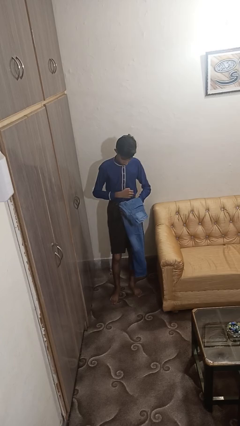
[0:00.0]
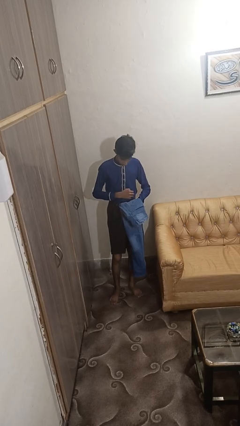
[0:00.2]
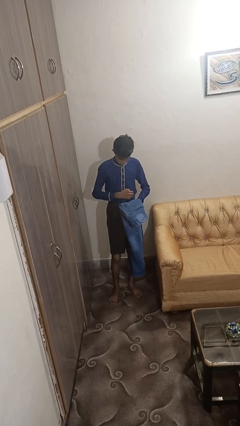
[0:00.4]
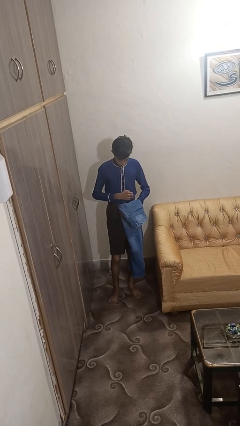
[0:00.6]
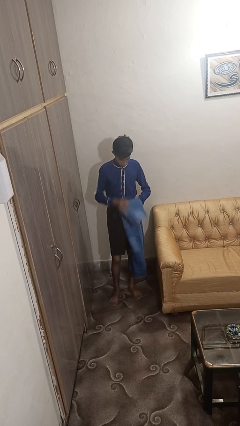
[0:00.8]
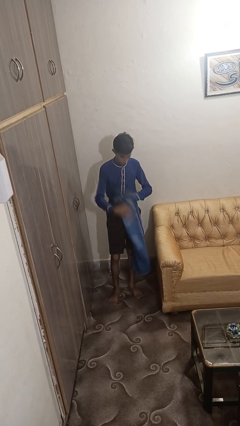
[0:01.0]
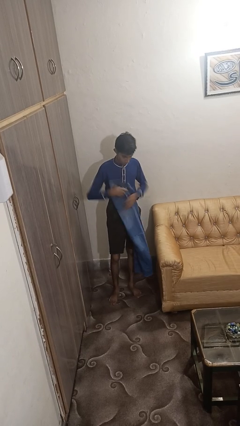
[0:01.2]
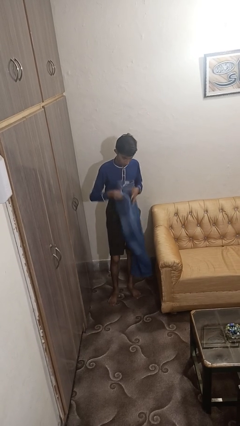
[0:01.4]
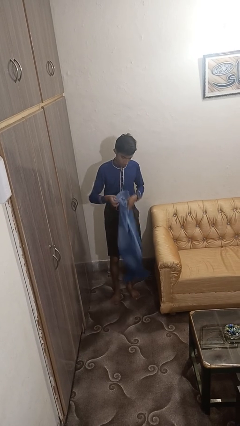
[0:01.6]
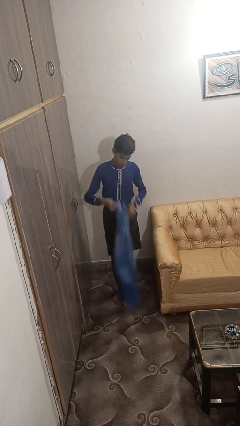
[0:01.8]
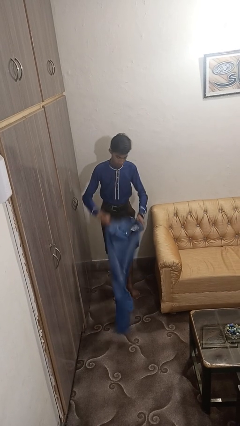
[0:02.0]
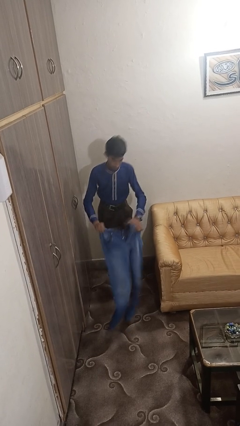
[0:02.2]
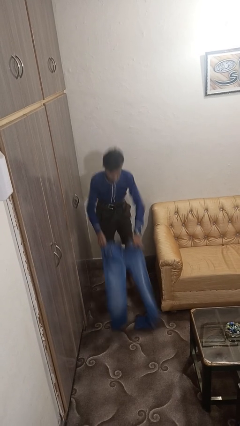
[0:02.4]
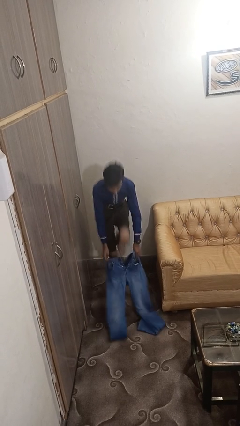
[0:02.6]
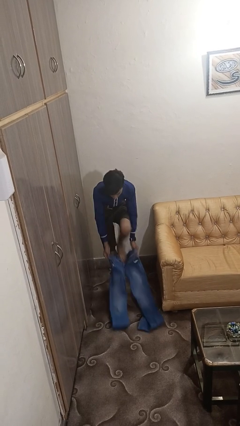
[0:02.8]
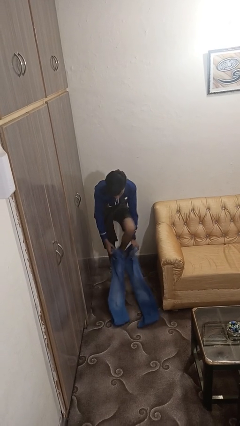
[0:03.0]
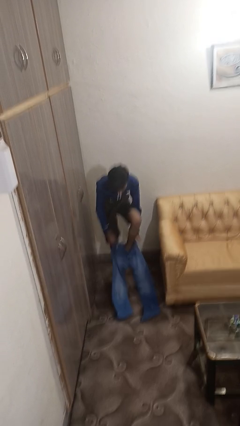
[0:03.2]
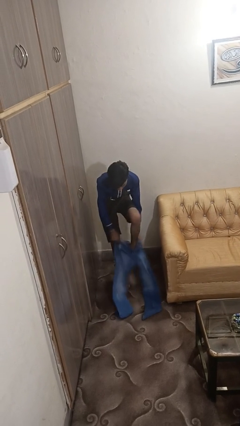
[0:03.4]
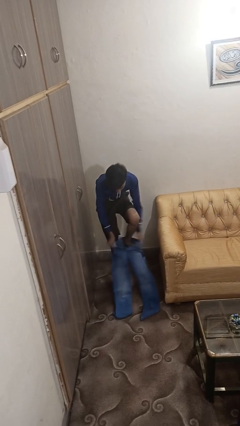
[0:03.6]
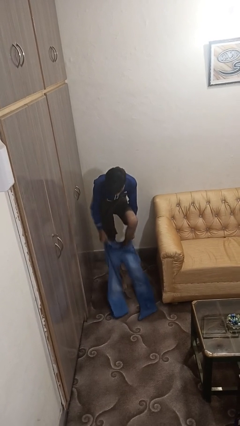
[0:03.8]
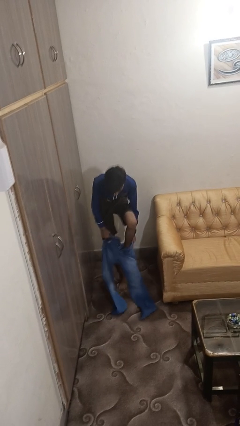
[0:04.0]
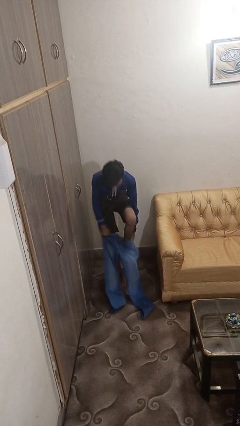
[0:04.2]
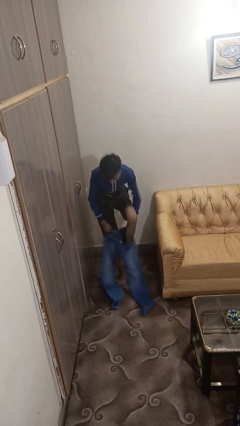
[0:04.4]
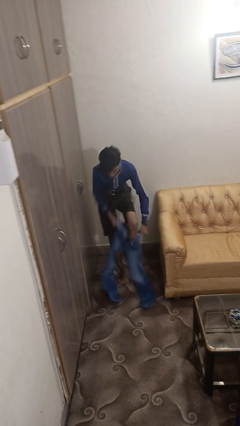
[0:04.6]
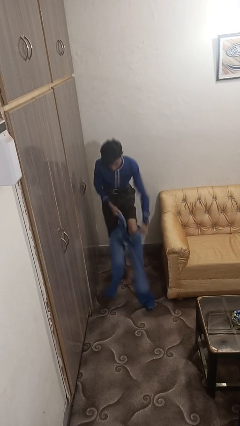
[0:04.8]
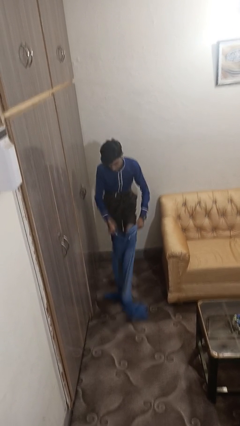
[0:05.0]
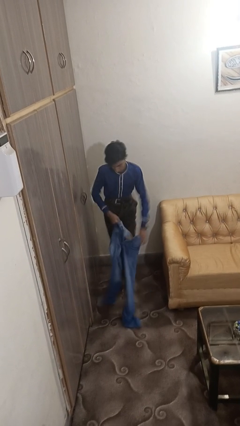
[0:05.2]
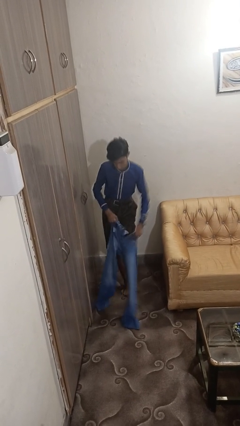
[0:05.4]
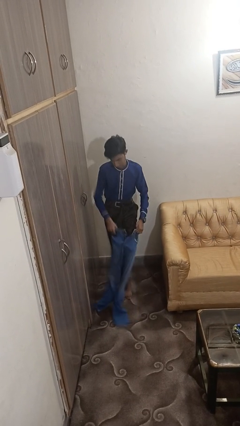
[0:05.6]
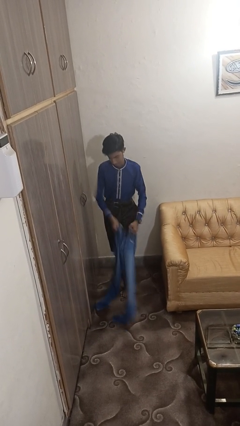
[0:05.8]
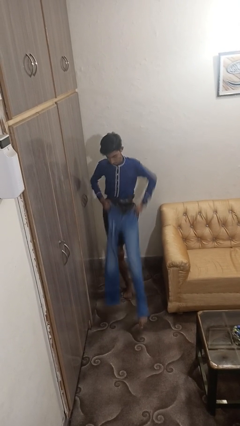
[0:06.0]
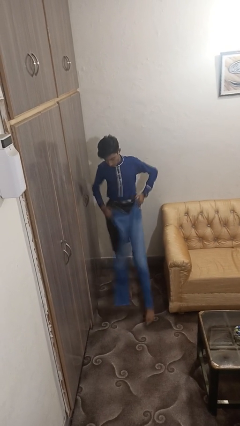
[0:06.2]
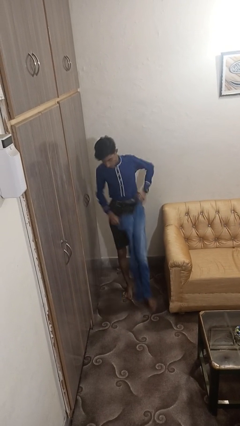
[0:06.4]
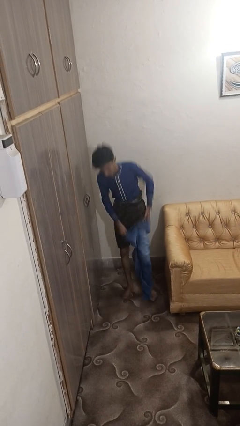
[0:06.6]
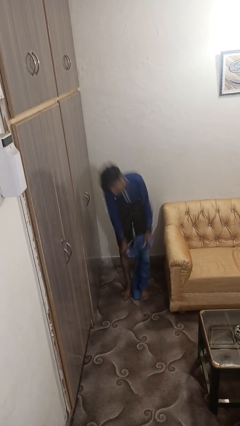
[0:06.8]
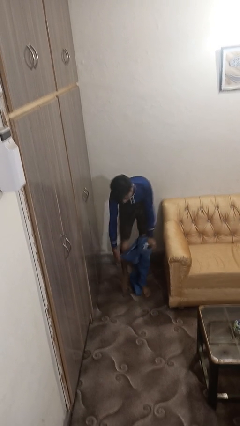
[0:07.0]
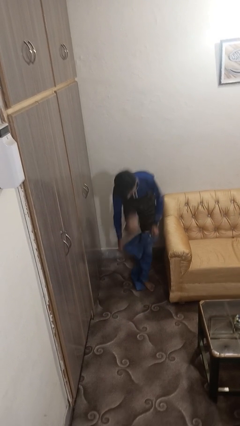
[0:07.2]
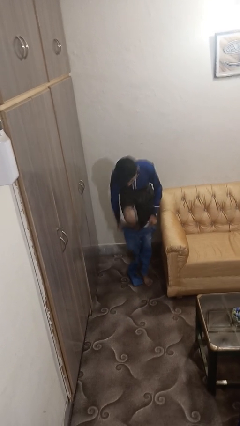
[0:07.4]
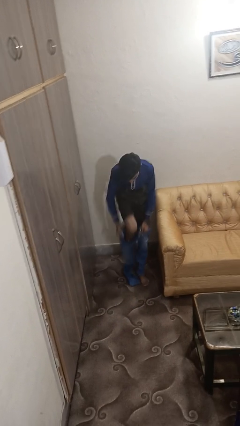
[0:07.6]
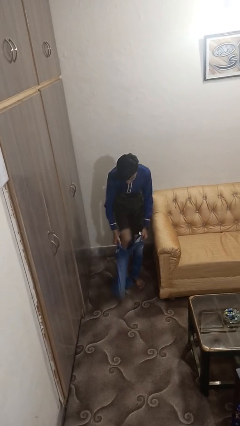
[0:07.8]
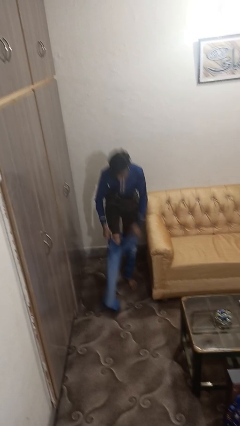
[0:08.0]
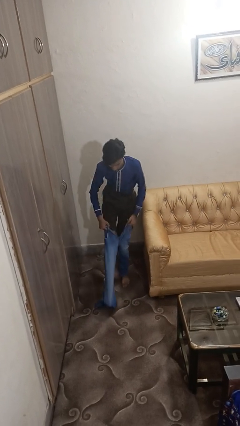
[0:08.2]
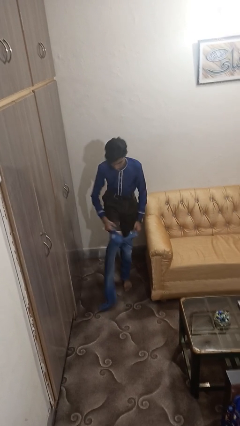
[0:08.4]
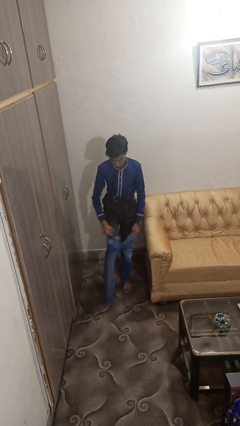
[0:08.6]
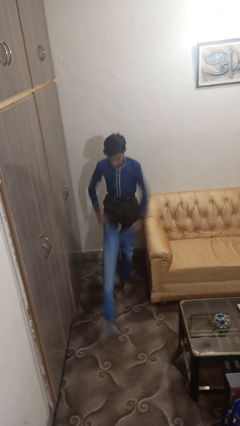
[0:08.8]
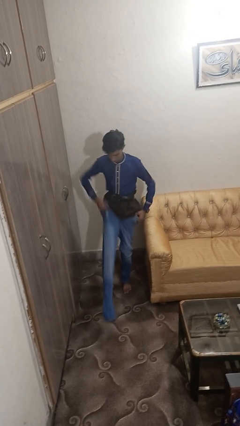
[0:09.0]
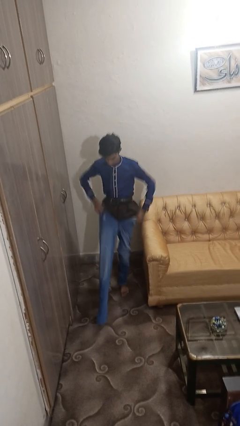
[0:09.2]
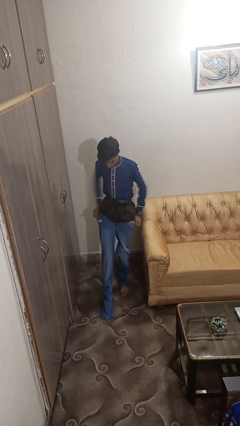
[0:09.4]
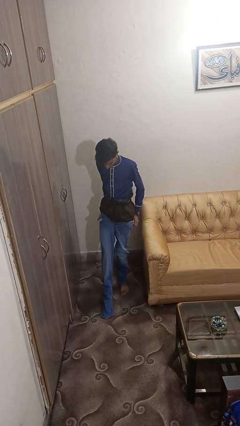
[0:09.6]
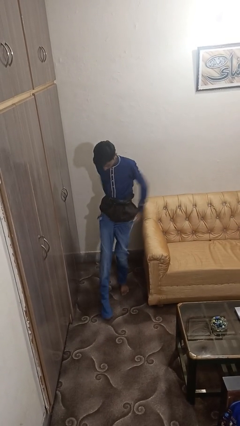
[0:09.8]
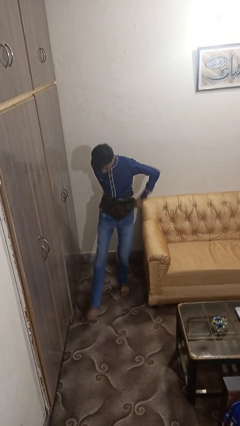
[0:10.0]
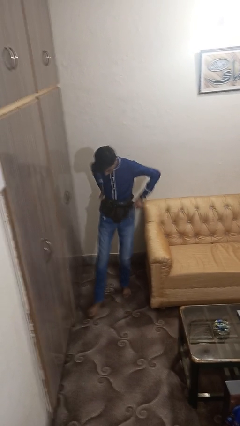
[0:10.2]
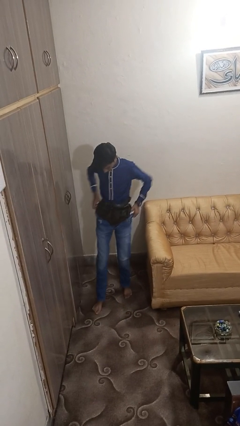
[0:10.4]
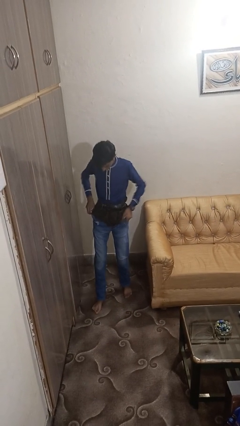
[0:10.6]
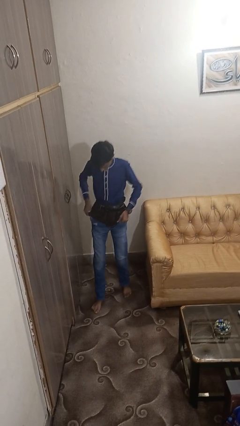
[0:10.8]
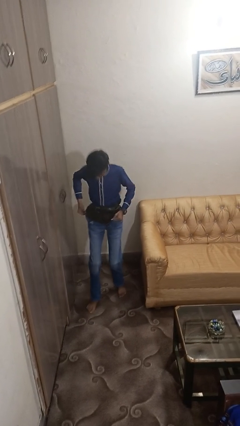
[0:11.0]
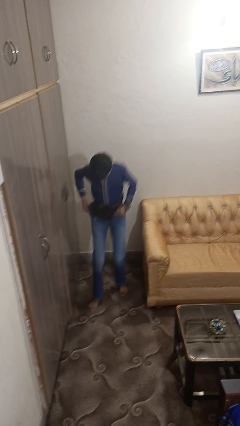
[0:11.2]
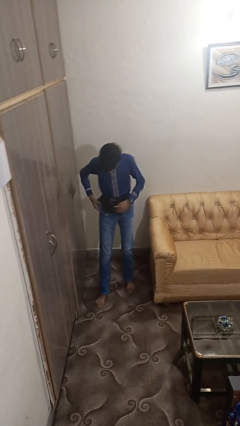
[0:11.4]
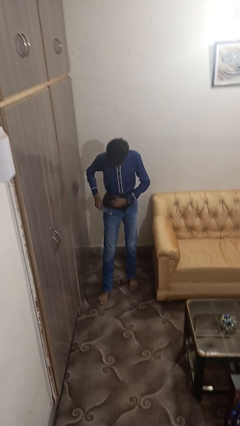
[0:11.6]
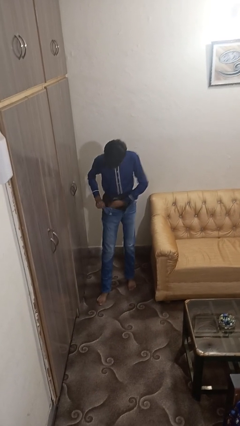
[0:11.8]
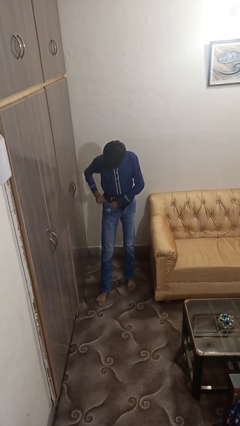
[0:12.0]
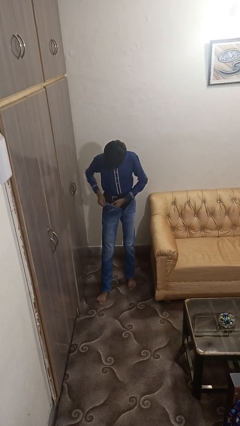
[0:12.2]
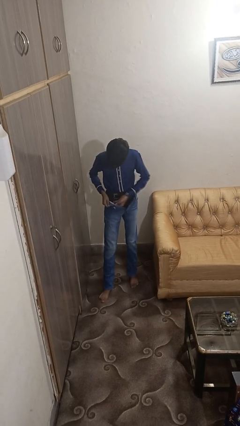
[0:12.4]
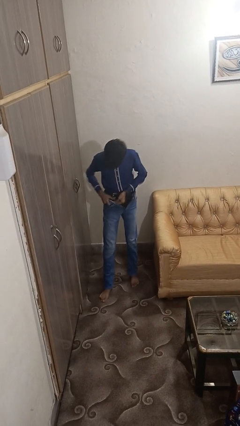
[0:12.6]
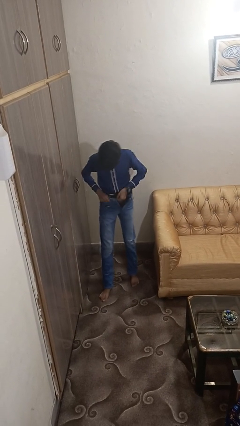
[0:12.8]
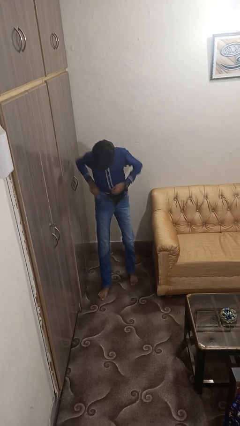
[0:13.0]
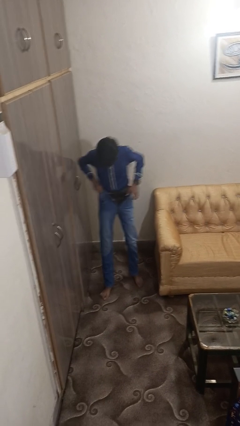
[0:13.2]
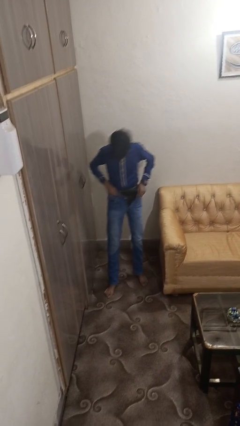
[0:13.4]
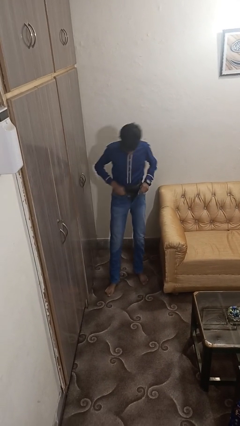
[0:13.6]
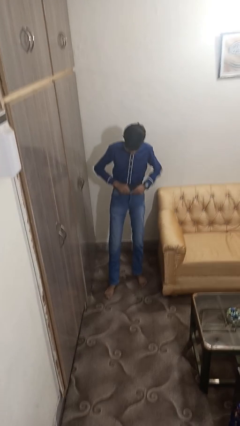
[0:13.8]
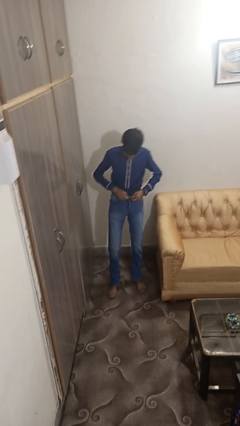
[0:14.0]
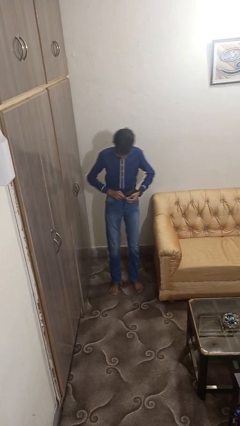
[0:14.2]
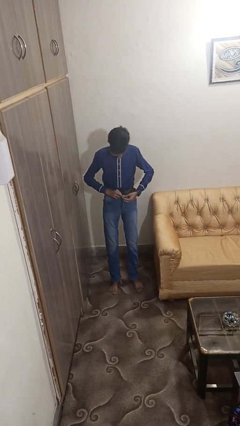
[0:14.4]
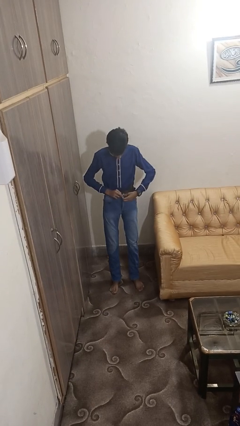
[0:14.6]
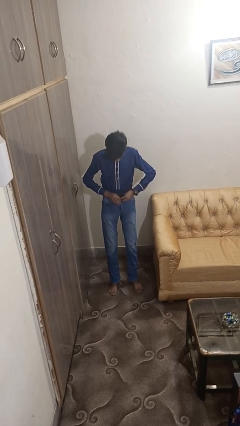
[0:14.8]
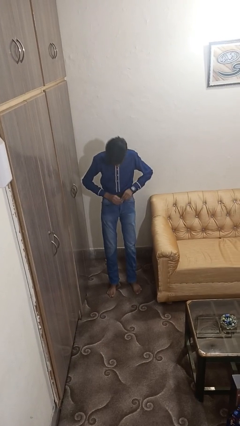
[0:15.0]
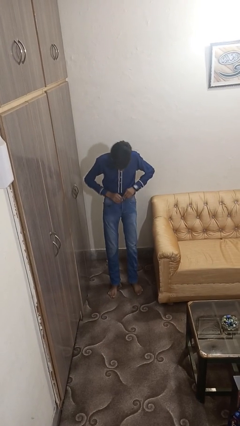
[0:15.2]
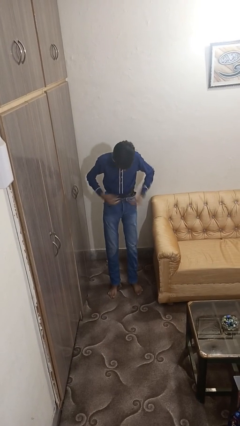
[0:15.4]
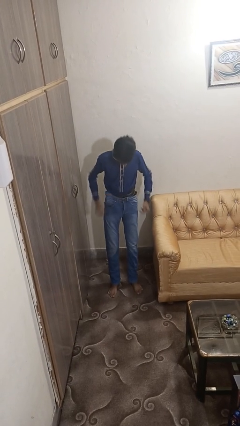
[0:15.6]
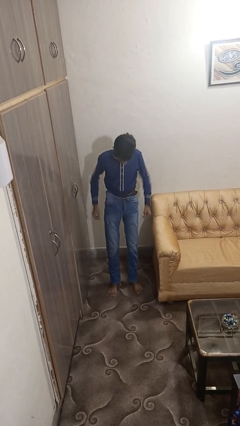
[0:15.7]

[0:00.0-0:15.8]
person puts on pants

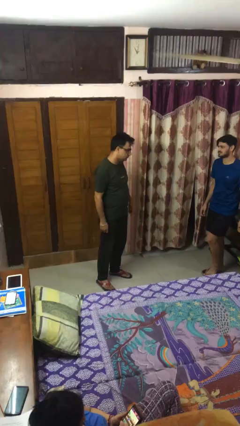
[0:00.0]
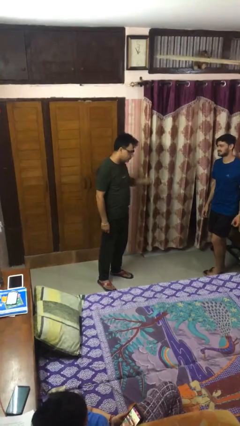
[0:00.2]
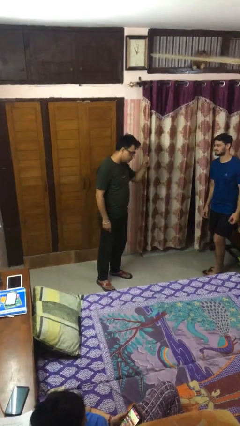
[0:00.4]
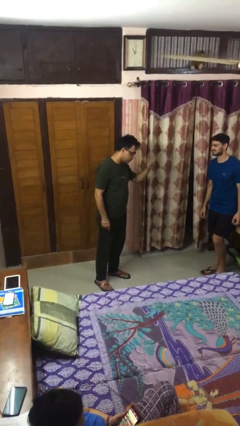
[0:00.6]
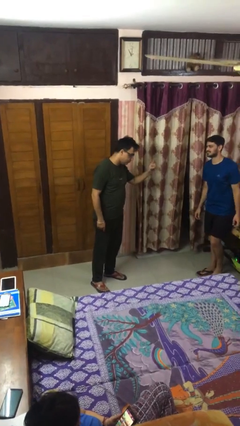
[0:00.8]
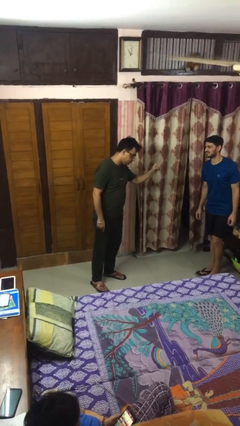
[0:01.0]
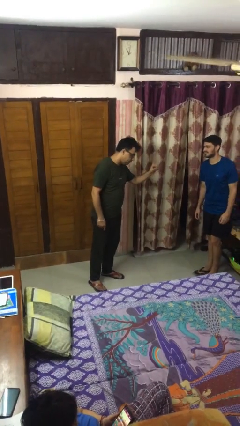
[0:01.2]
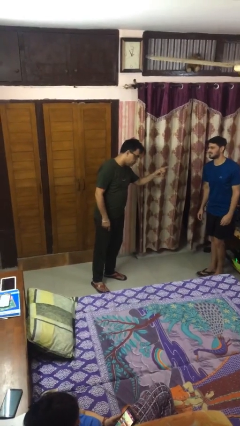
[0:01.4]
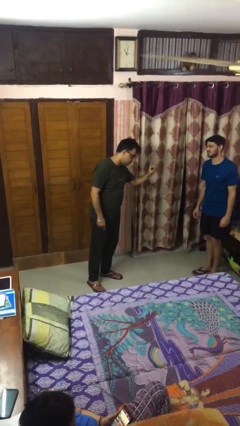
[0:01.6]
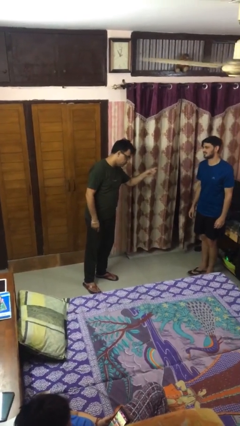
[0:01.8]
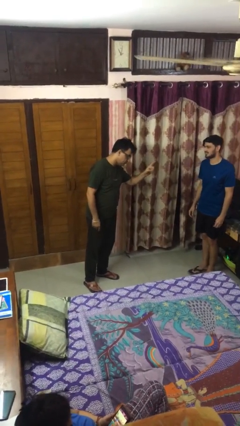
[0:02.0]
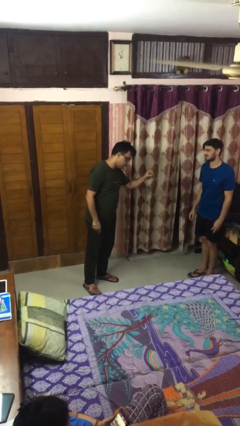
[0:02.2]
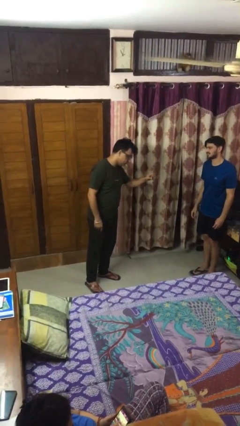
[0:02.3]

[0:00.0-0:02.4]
person points at person

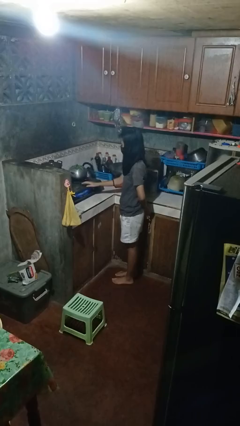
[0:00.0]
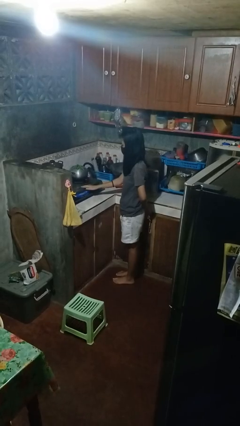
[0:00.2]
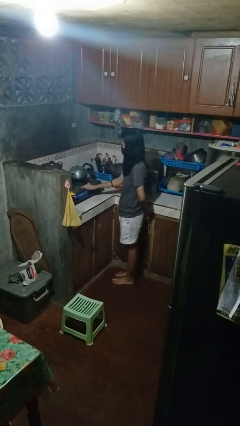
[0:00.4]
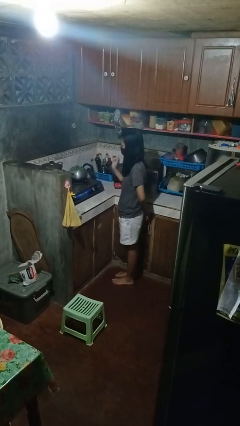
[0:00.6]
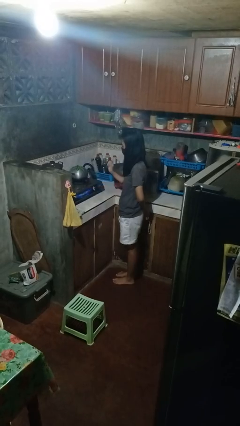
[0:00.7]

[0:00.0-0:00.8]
person burns hand
